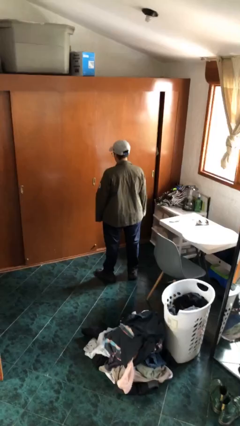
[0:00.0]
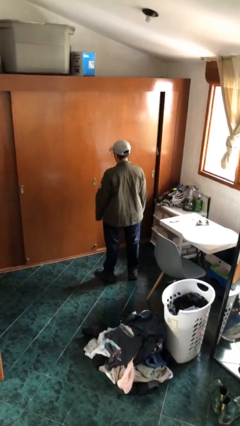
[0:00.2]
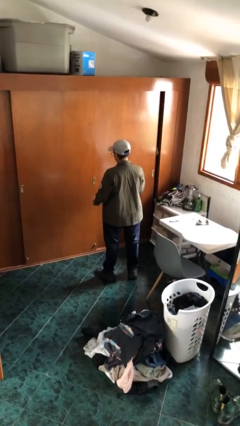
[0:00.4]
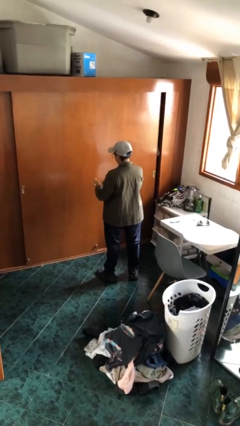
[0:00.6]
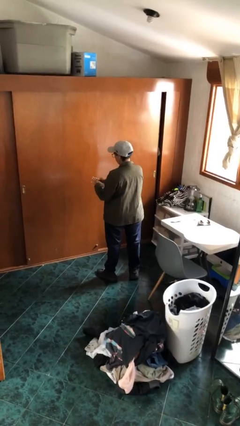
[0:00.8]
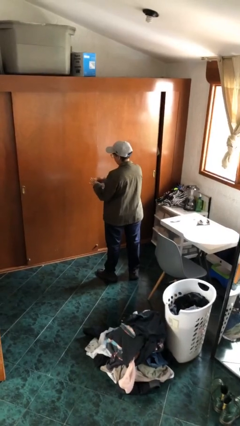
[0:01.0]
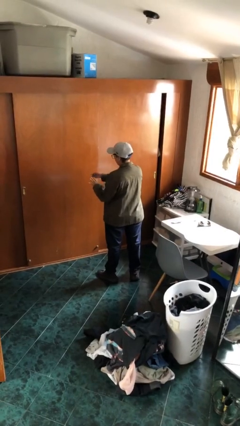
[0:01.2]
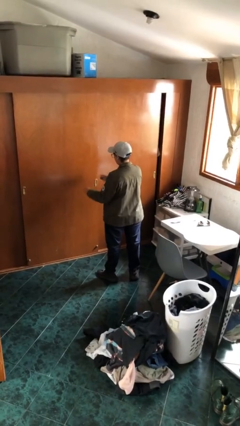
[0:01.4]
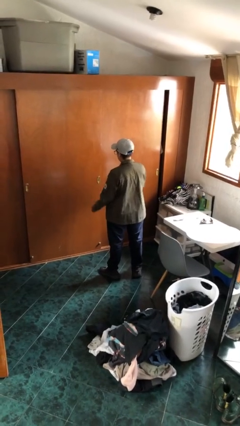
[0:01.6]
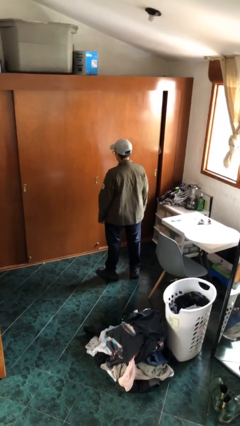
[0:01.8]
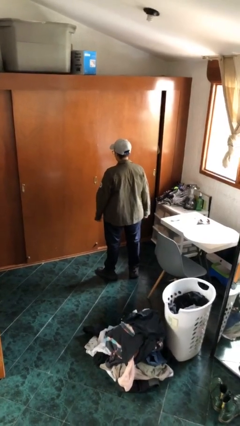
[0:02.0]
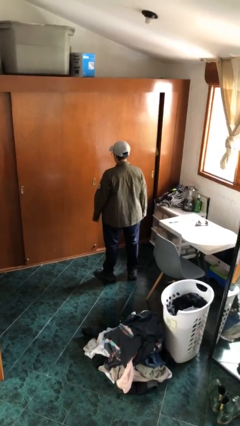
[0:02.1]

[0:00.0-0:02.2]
person takes off ring

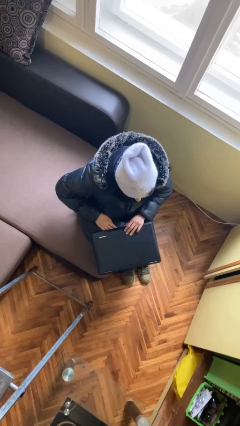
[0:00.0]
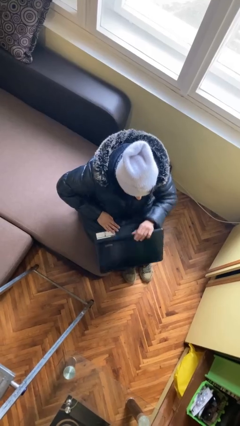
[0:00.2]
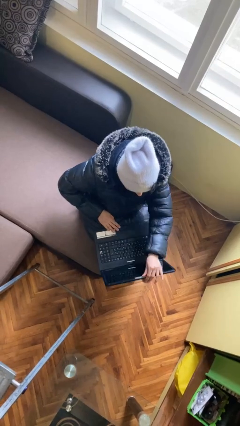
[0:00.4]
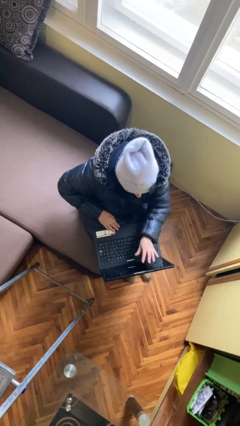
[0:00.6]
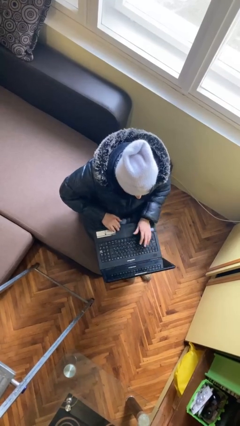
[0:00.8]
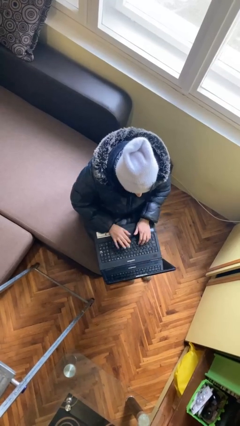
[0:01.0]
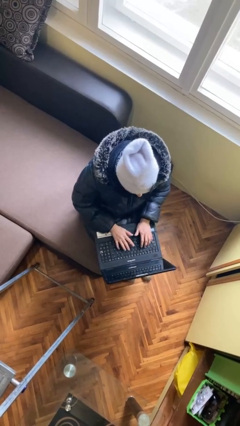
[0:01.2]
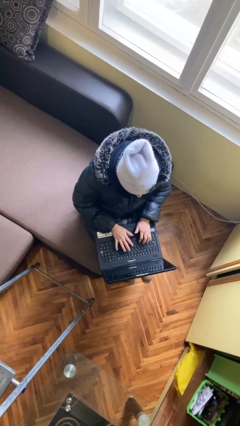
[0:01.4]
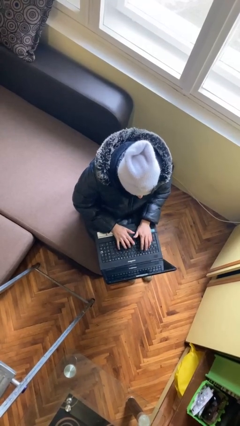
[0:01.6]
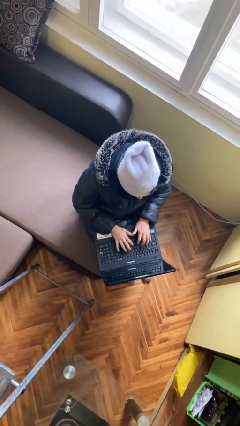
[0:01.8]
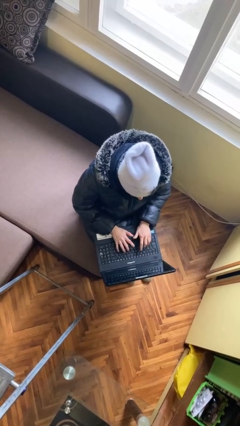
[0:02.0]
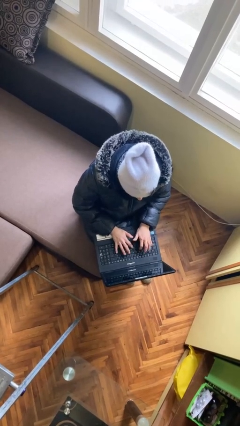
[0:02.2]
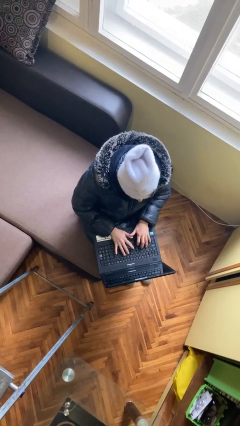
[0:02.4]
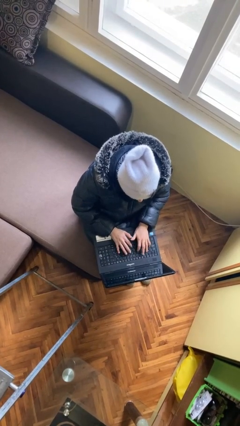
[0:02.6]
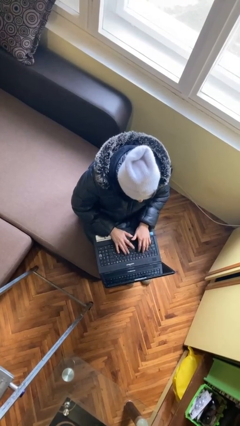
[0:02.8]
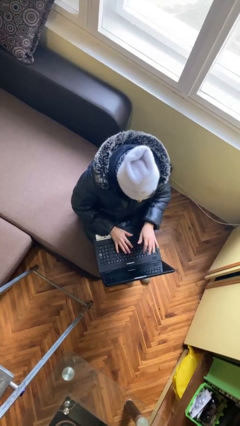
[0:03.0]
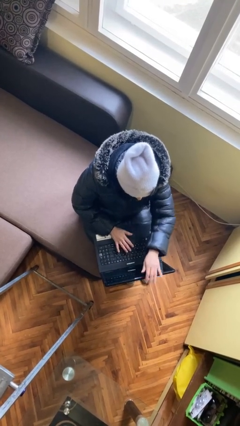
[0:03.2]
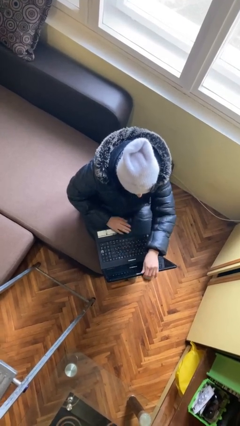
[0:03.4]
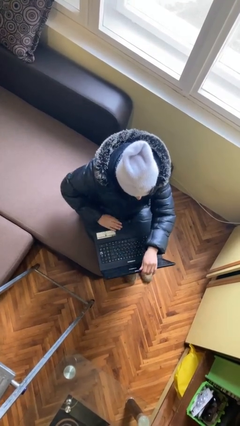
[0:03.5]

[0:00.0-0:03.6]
person interacts with laptop

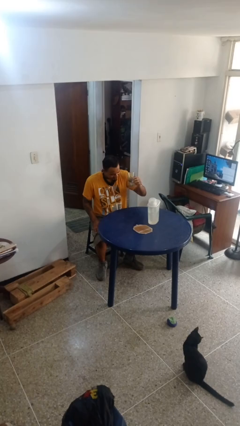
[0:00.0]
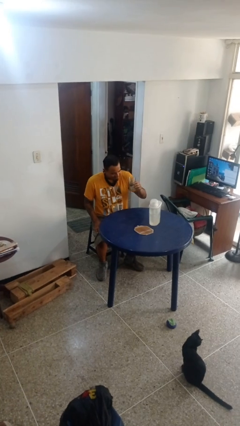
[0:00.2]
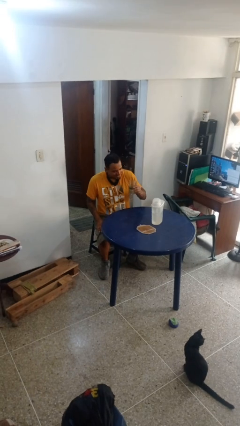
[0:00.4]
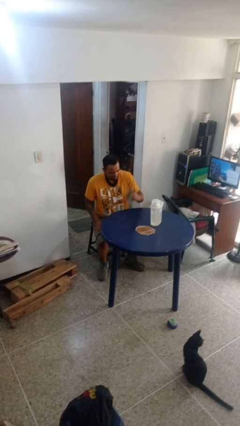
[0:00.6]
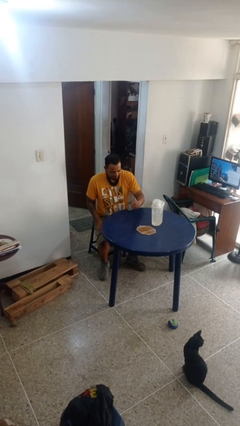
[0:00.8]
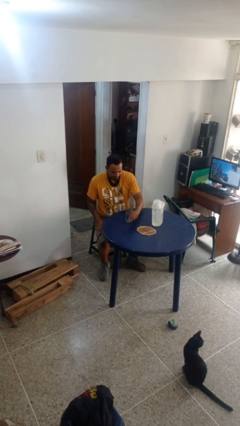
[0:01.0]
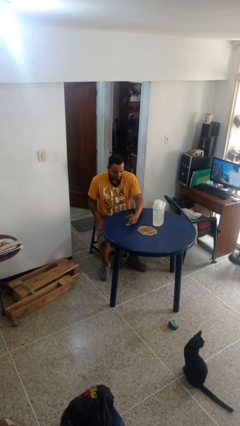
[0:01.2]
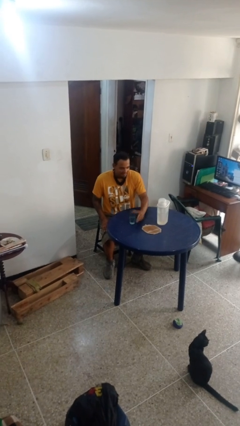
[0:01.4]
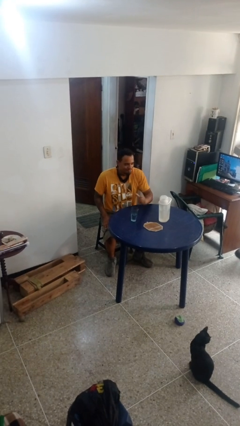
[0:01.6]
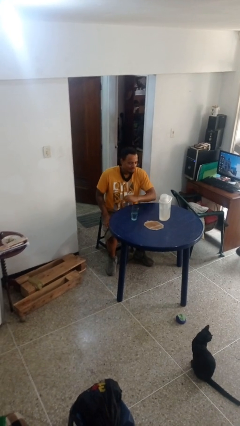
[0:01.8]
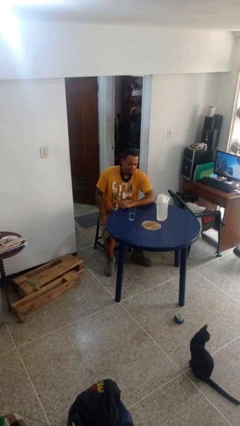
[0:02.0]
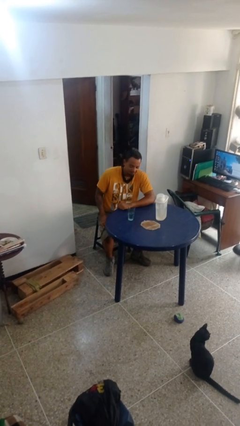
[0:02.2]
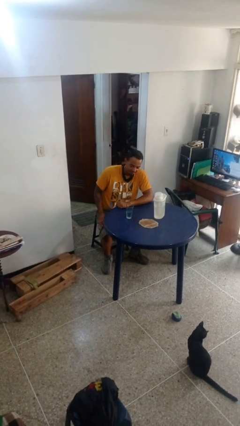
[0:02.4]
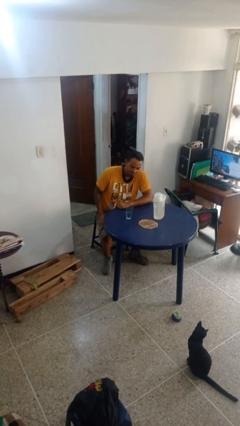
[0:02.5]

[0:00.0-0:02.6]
person puts down object on table

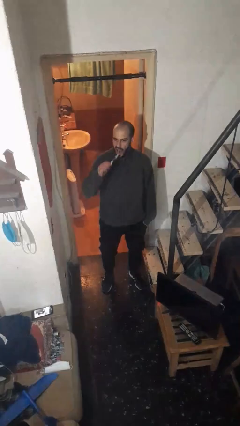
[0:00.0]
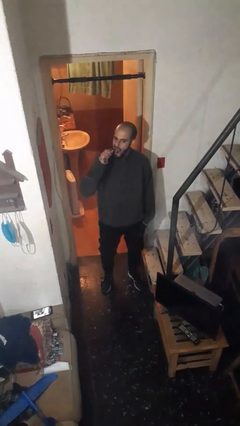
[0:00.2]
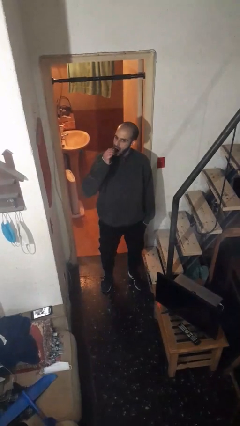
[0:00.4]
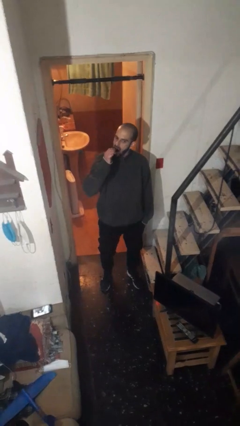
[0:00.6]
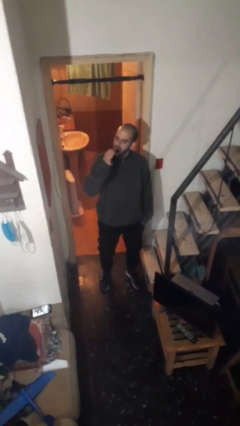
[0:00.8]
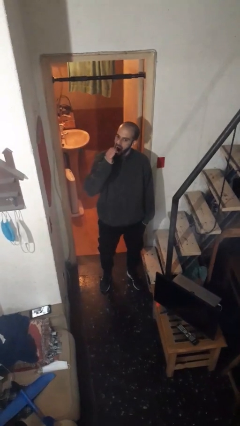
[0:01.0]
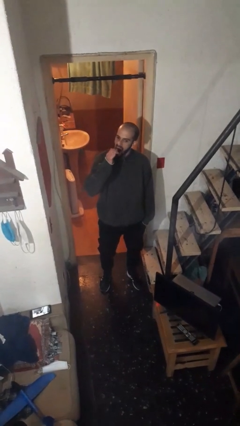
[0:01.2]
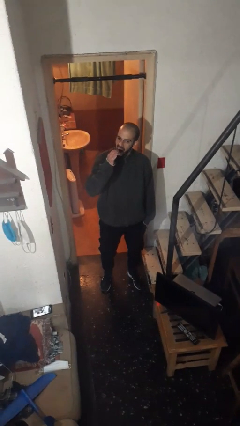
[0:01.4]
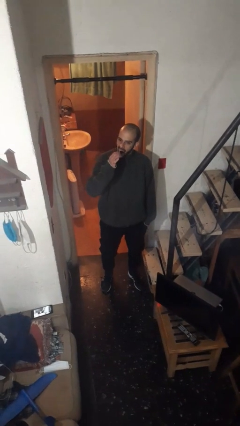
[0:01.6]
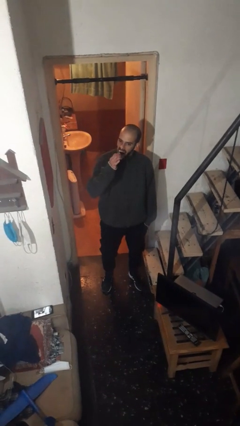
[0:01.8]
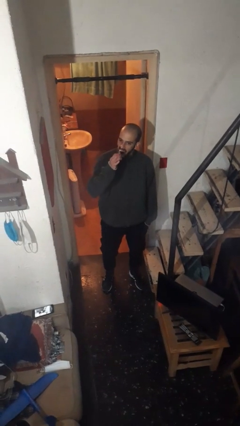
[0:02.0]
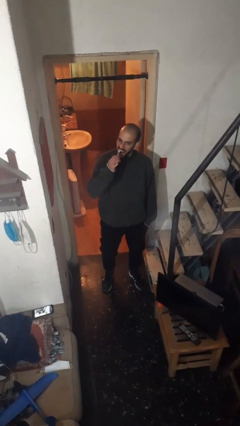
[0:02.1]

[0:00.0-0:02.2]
person brushes teeth

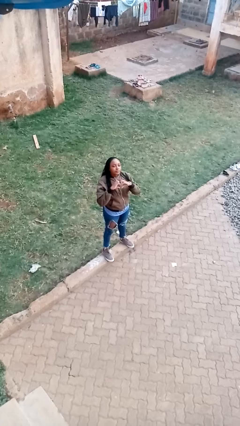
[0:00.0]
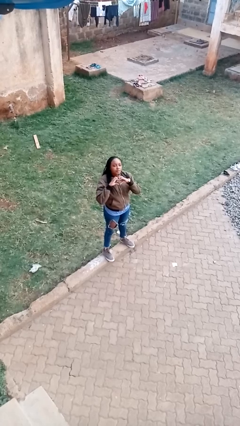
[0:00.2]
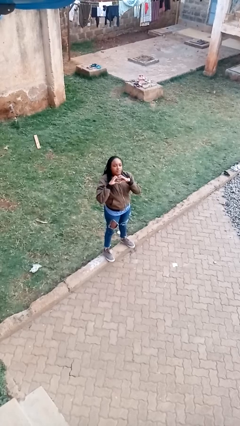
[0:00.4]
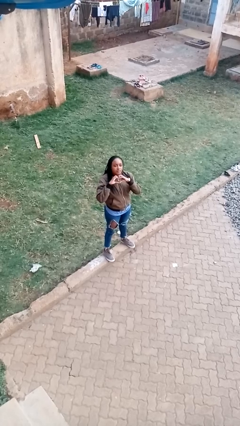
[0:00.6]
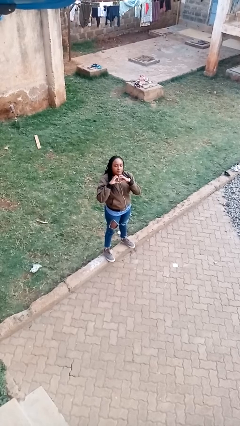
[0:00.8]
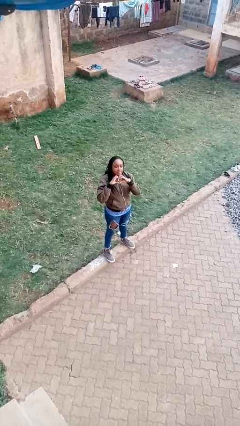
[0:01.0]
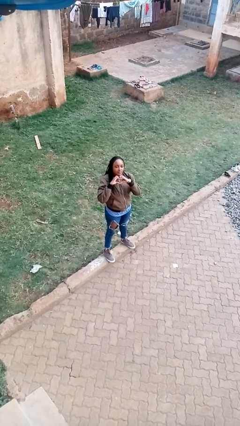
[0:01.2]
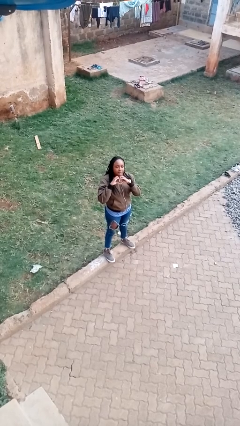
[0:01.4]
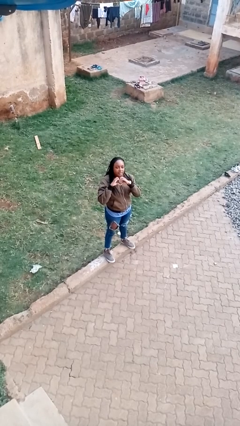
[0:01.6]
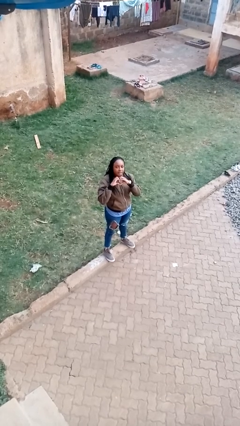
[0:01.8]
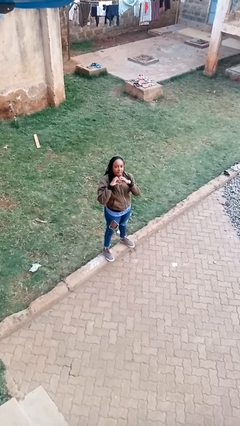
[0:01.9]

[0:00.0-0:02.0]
person gestures heart

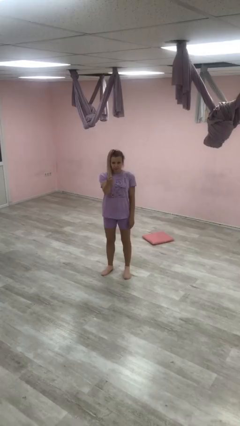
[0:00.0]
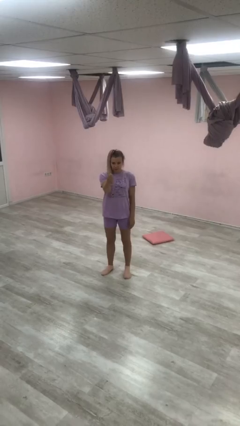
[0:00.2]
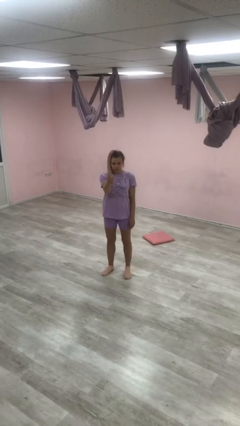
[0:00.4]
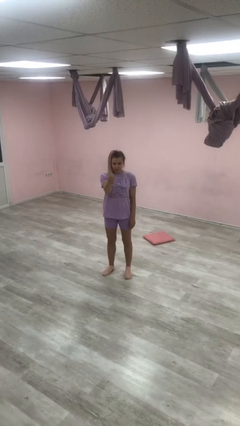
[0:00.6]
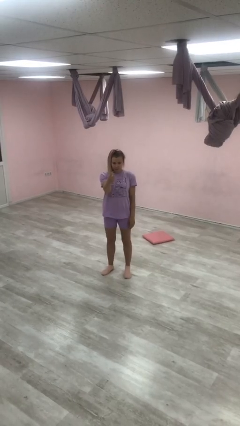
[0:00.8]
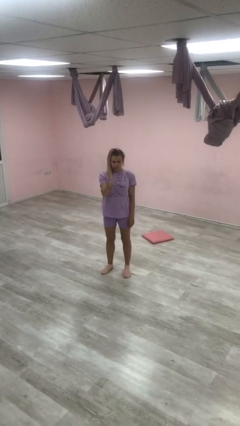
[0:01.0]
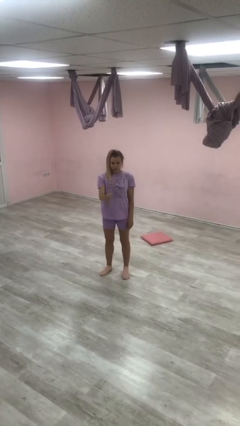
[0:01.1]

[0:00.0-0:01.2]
person gestures come here

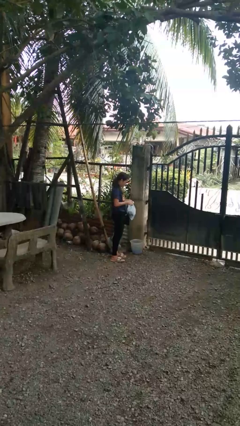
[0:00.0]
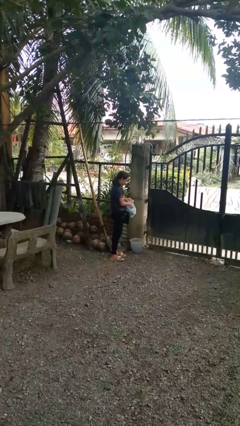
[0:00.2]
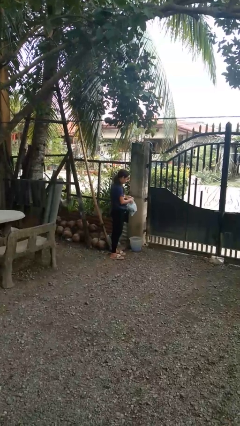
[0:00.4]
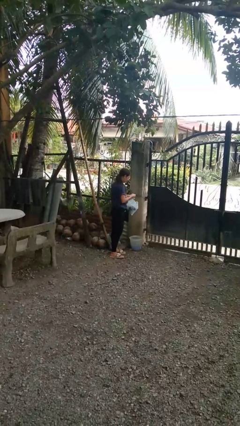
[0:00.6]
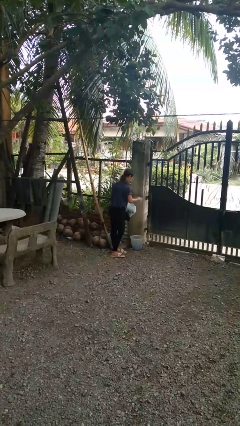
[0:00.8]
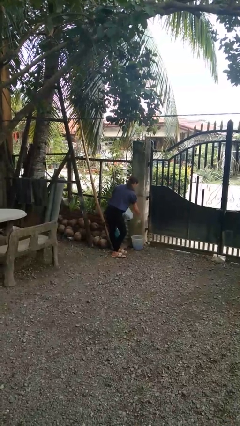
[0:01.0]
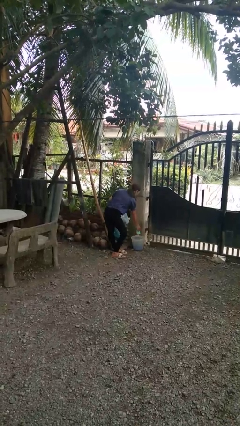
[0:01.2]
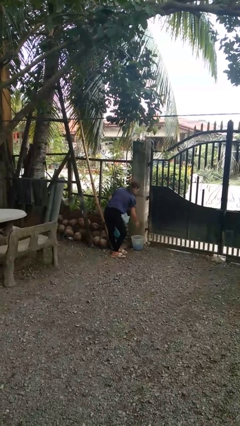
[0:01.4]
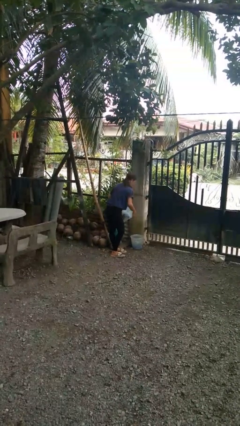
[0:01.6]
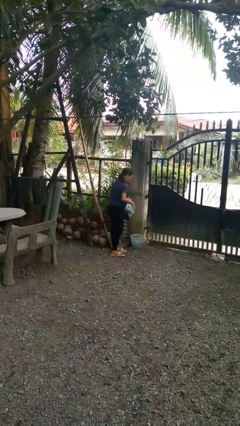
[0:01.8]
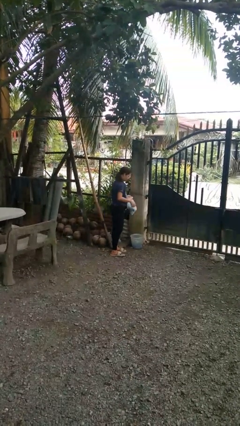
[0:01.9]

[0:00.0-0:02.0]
person discards trash

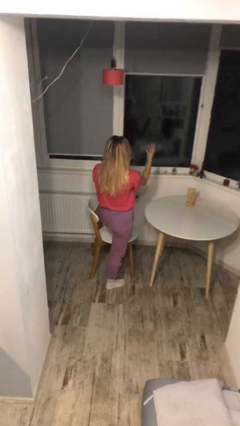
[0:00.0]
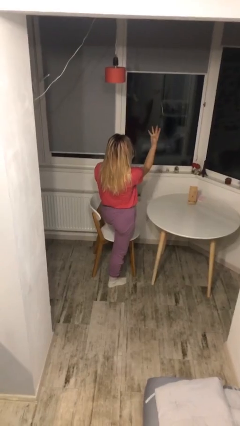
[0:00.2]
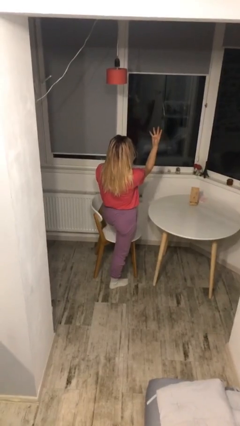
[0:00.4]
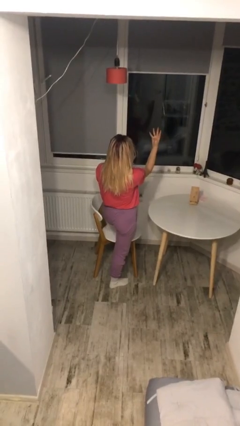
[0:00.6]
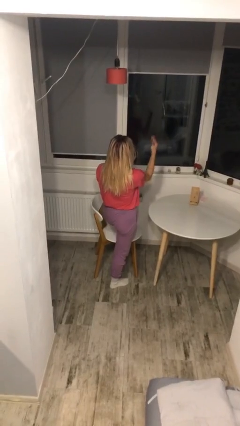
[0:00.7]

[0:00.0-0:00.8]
person gestures number four
